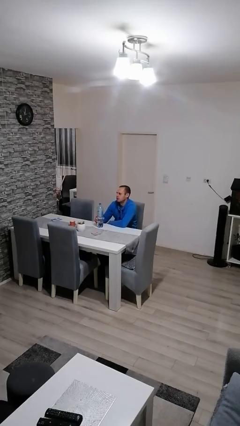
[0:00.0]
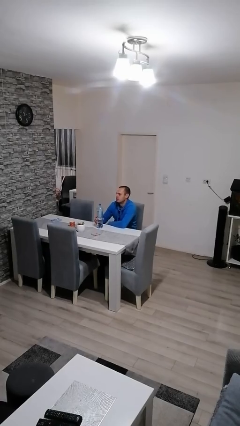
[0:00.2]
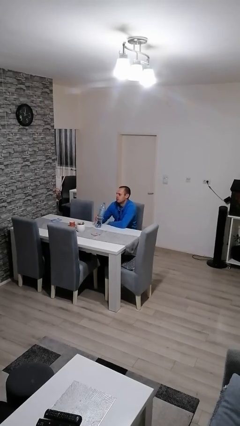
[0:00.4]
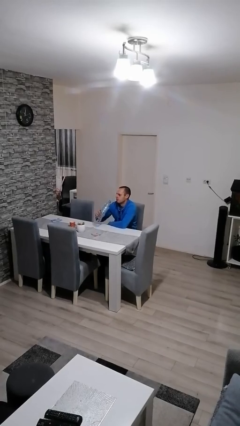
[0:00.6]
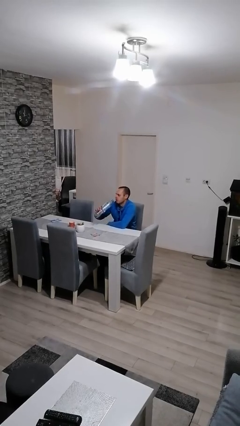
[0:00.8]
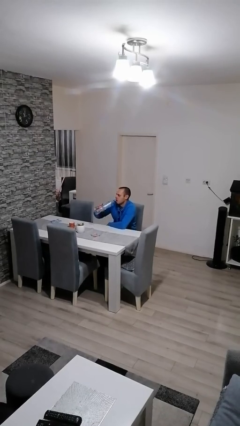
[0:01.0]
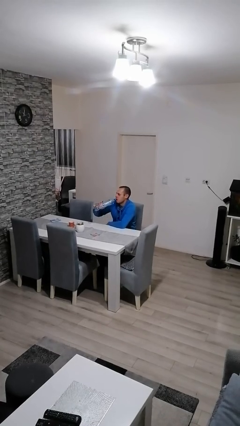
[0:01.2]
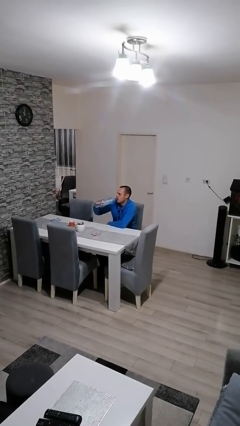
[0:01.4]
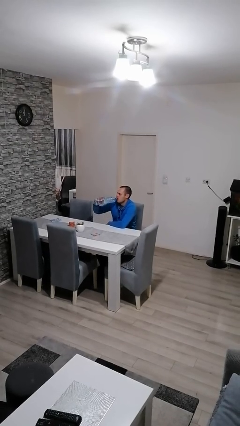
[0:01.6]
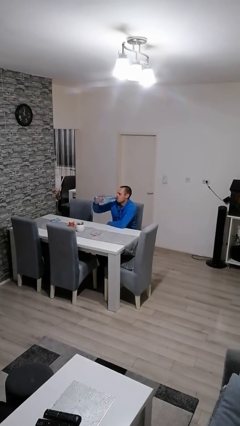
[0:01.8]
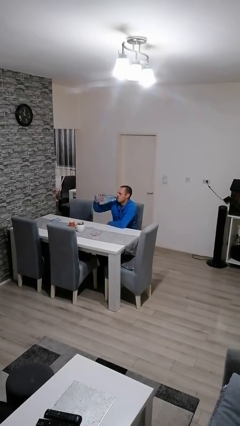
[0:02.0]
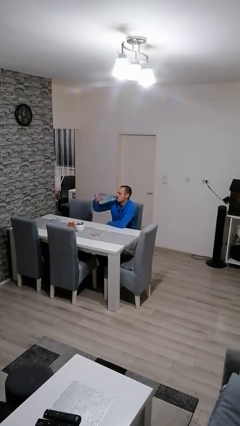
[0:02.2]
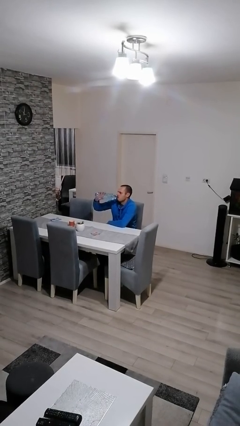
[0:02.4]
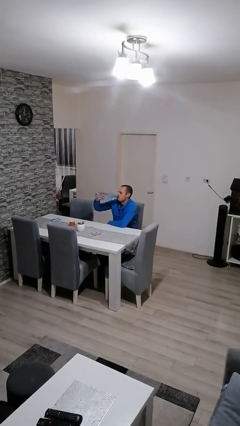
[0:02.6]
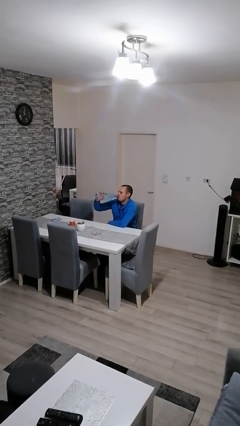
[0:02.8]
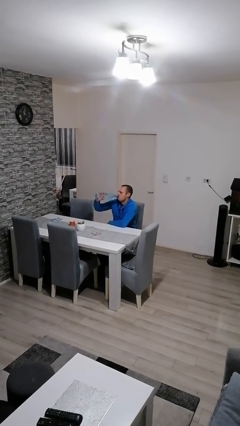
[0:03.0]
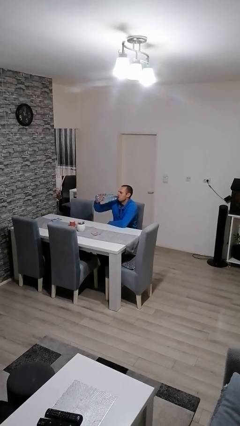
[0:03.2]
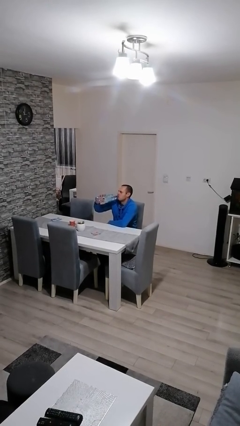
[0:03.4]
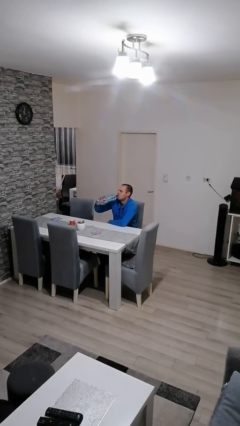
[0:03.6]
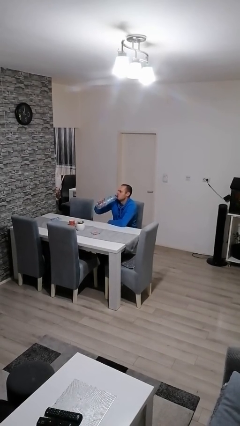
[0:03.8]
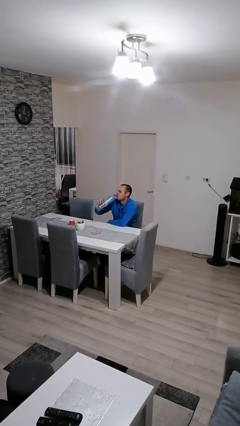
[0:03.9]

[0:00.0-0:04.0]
person drinks from bottle

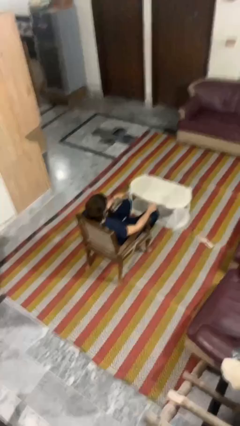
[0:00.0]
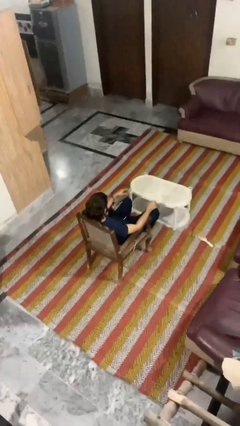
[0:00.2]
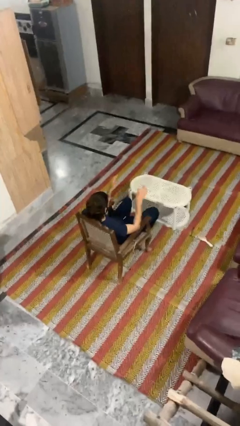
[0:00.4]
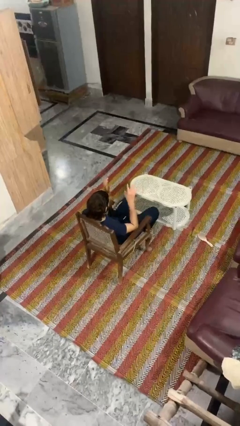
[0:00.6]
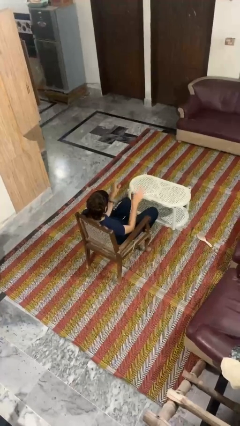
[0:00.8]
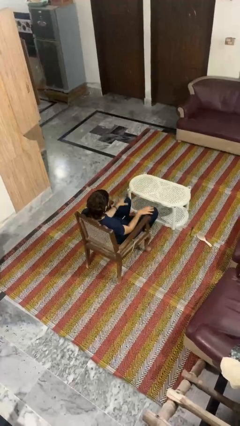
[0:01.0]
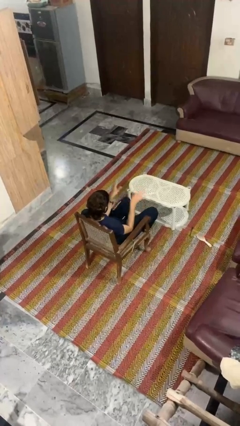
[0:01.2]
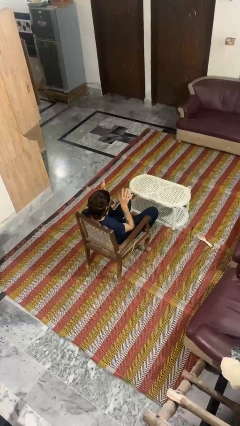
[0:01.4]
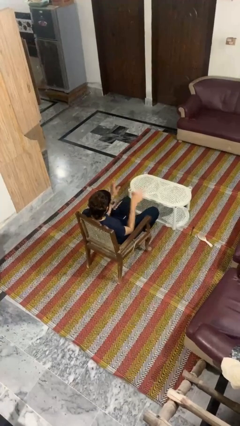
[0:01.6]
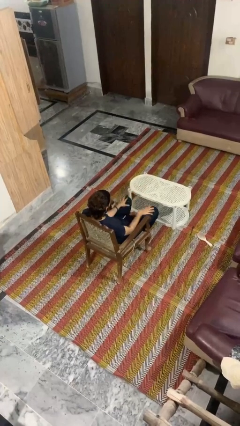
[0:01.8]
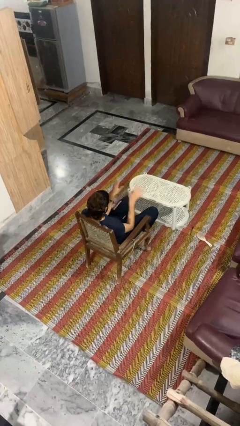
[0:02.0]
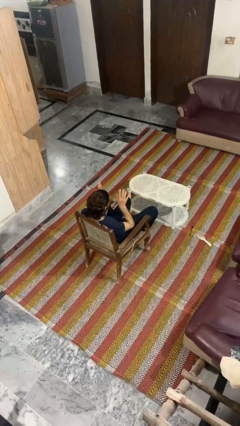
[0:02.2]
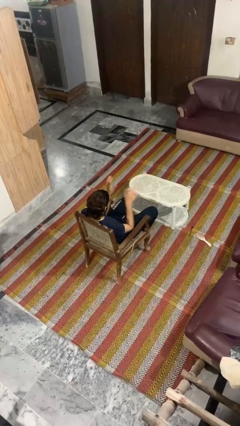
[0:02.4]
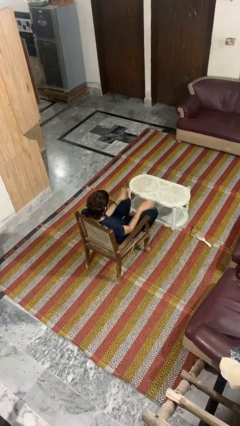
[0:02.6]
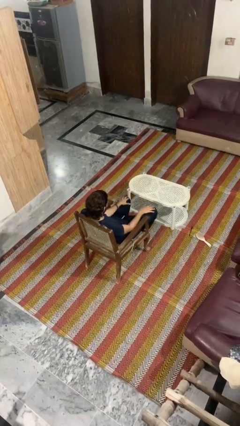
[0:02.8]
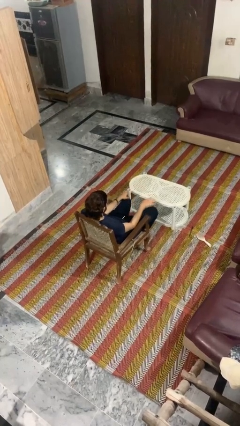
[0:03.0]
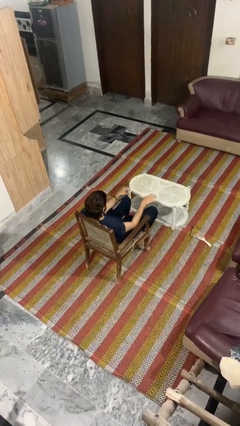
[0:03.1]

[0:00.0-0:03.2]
person slaps hands on thighs

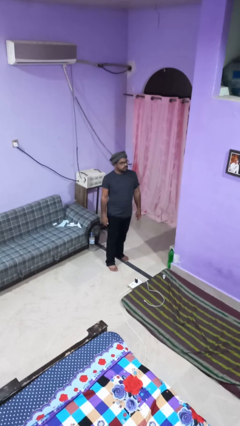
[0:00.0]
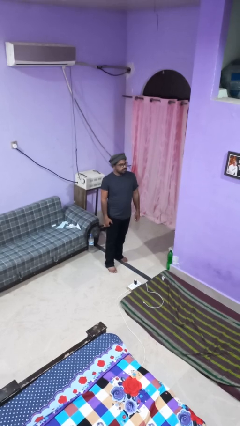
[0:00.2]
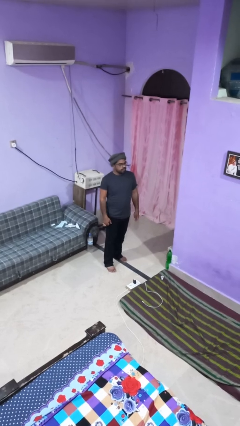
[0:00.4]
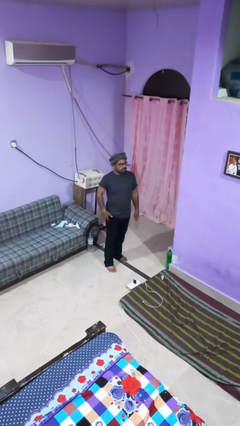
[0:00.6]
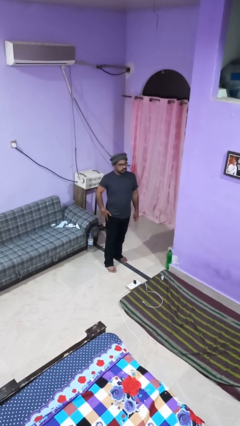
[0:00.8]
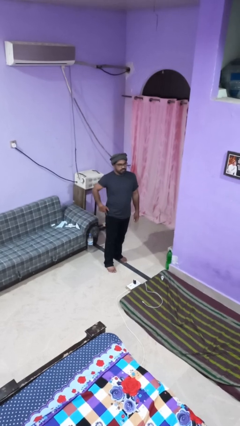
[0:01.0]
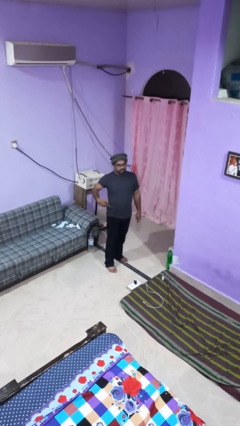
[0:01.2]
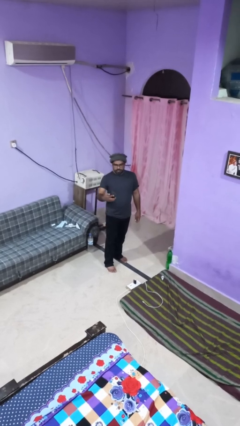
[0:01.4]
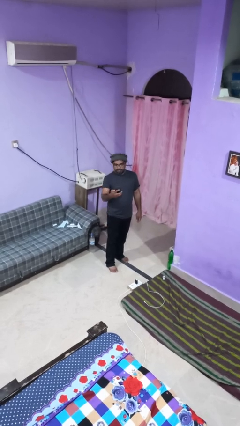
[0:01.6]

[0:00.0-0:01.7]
person takes phone from pocket

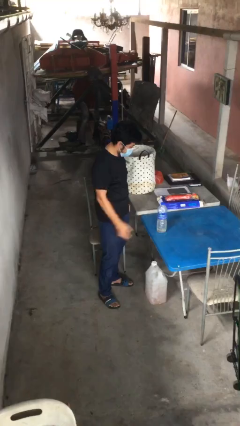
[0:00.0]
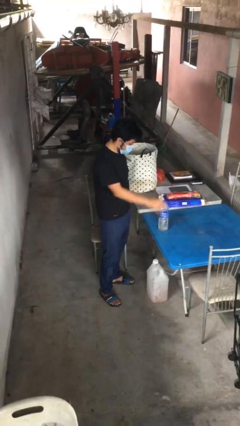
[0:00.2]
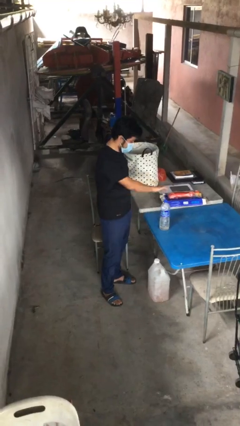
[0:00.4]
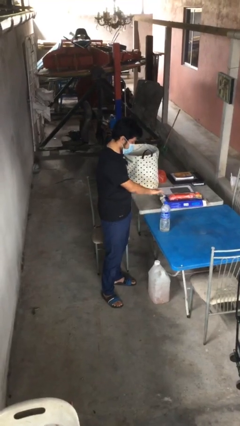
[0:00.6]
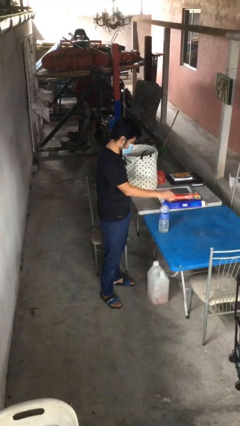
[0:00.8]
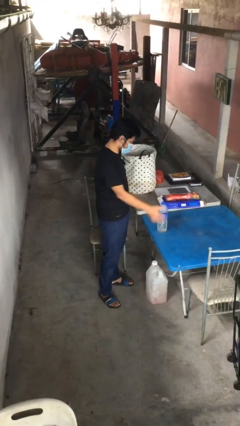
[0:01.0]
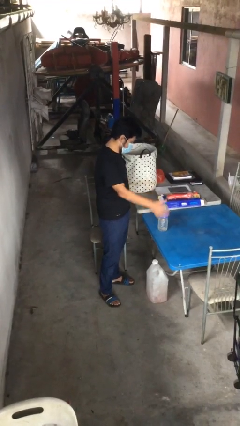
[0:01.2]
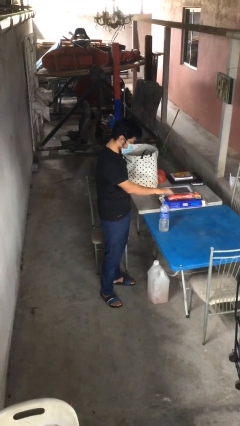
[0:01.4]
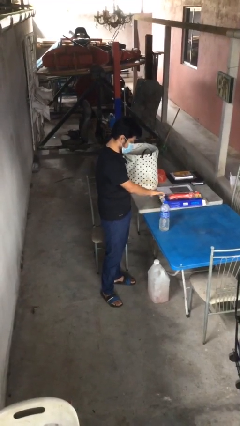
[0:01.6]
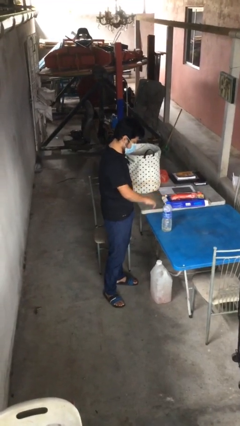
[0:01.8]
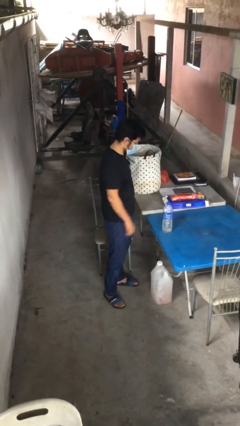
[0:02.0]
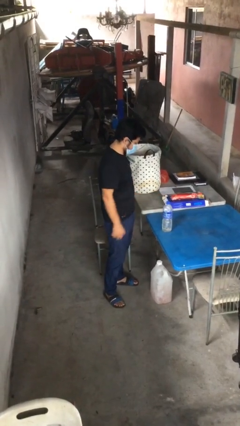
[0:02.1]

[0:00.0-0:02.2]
person waves hand over object

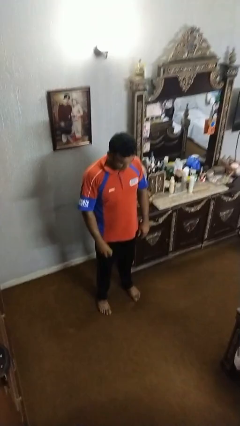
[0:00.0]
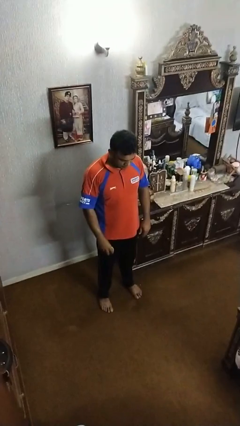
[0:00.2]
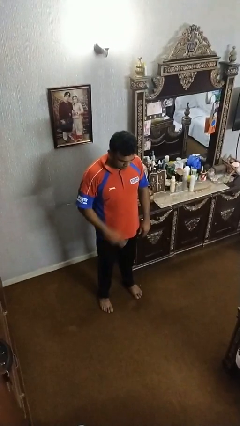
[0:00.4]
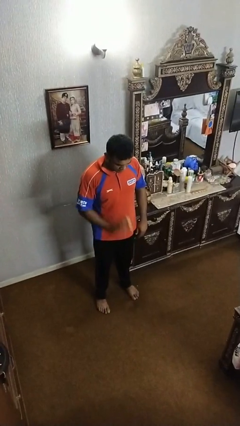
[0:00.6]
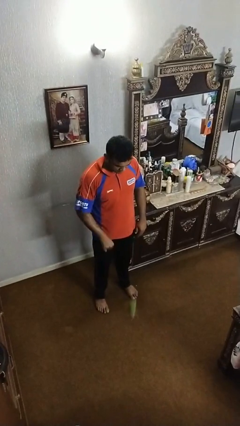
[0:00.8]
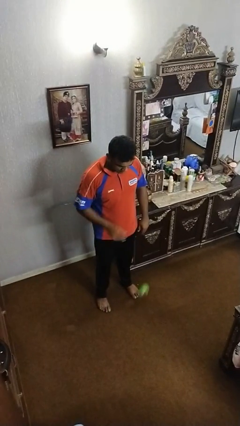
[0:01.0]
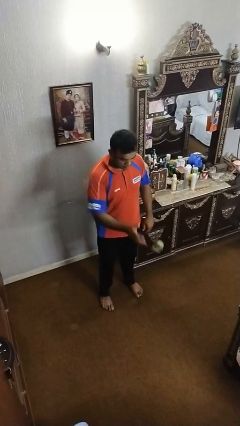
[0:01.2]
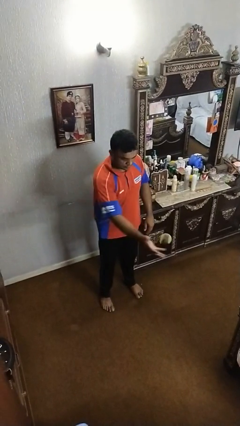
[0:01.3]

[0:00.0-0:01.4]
person bounces ball on floor

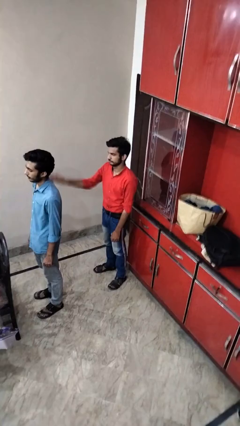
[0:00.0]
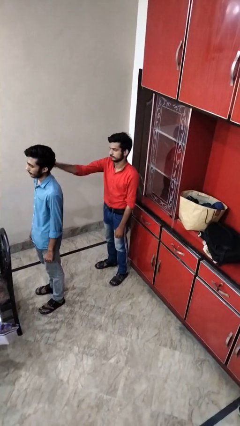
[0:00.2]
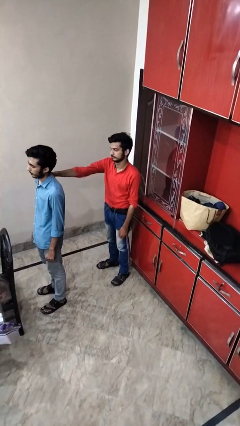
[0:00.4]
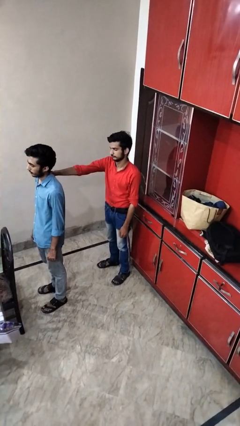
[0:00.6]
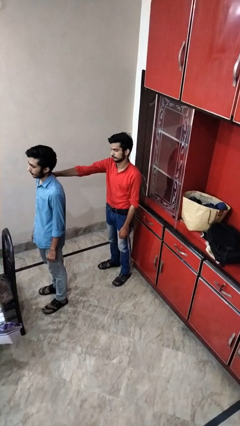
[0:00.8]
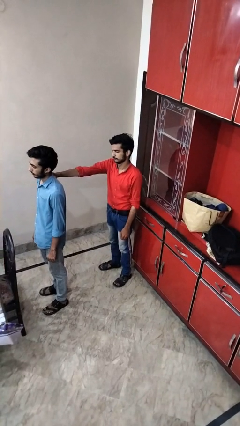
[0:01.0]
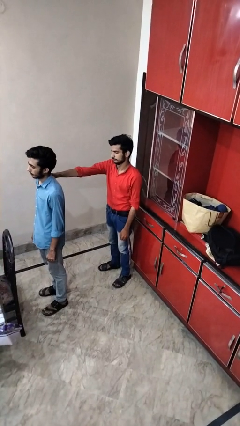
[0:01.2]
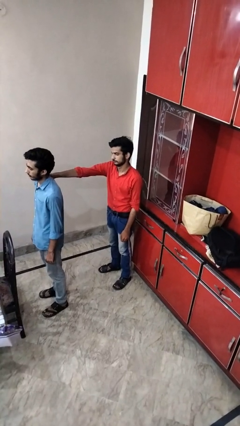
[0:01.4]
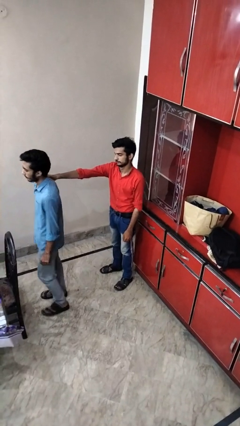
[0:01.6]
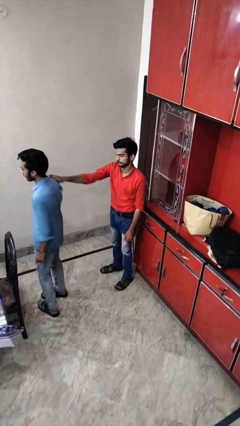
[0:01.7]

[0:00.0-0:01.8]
person grabs person by shoulder

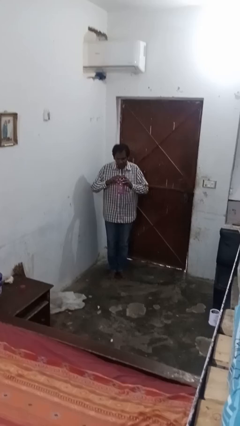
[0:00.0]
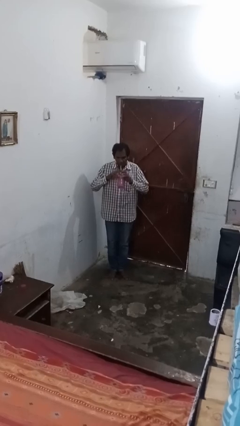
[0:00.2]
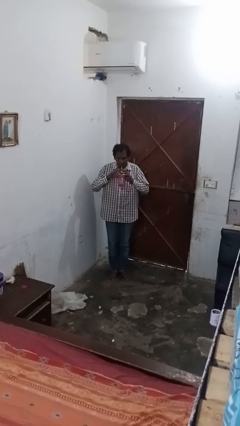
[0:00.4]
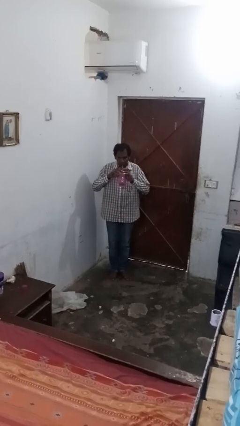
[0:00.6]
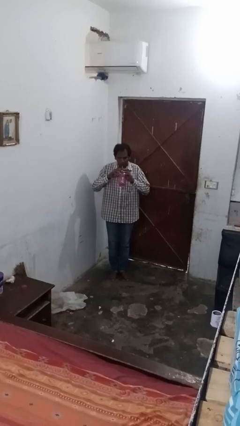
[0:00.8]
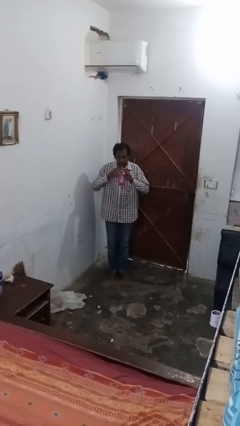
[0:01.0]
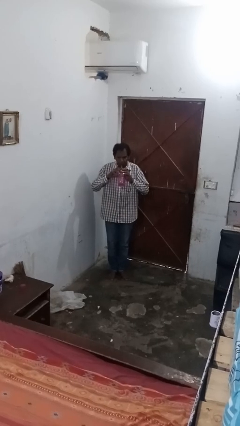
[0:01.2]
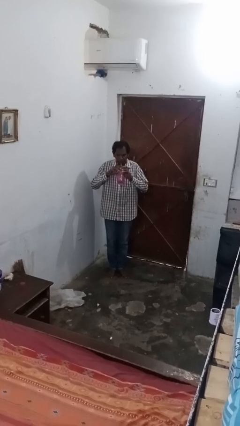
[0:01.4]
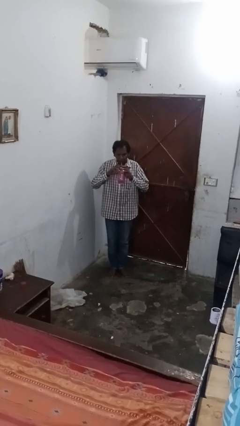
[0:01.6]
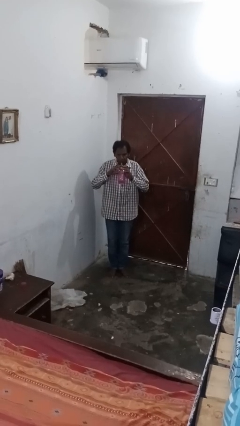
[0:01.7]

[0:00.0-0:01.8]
person drinks from straw

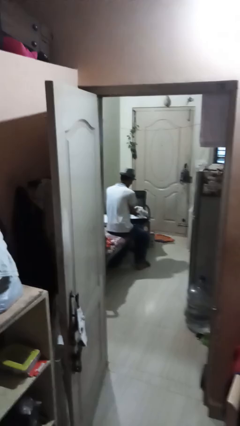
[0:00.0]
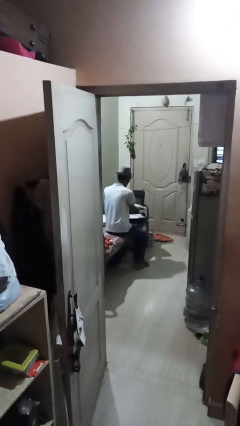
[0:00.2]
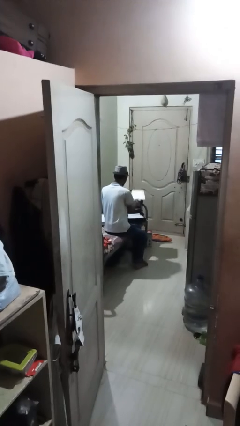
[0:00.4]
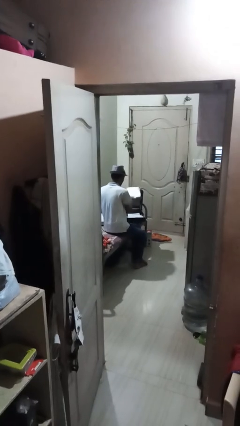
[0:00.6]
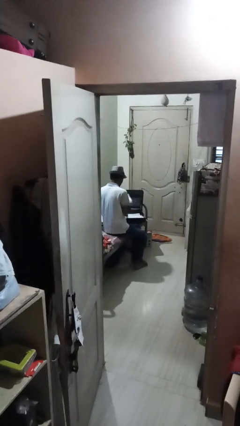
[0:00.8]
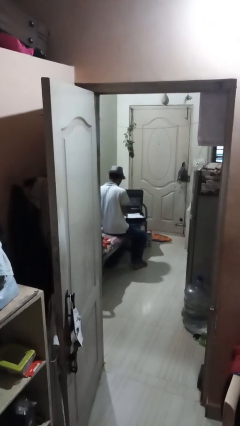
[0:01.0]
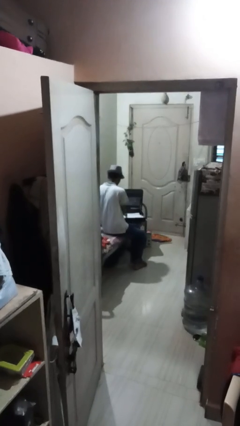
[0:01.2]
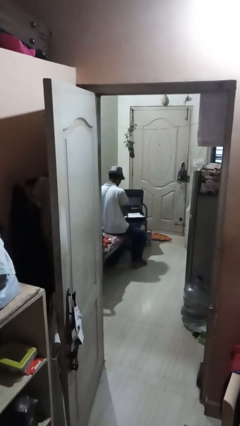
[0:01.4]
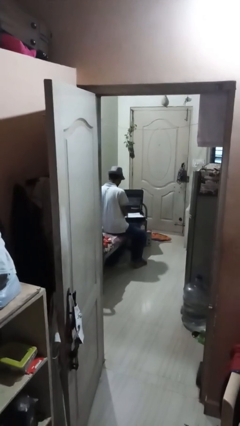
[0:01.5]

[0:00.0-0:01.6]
person unloads clothes from suitcase
